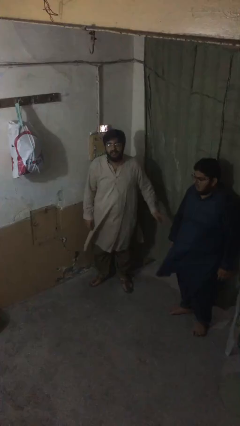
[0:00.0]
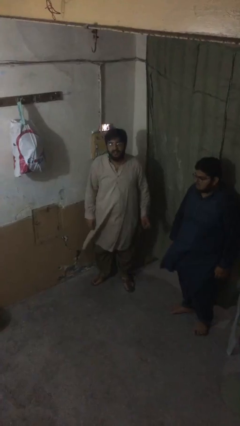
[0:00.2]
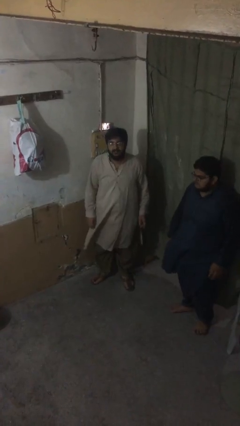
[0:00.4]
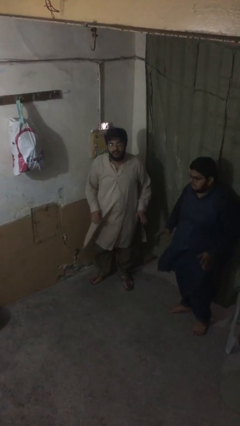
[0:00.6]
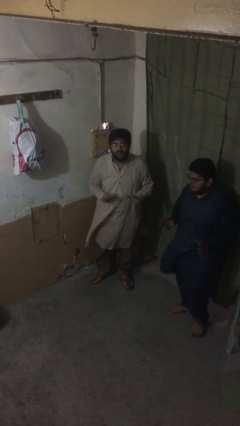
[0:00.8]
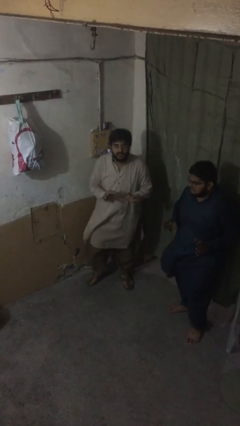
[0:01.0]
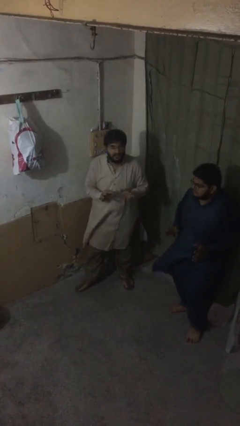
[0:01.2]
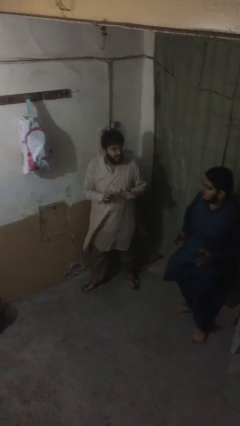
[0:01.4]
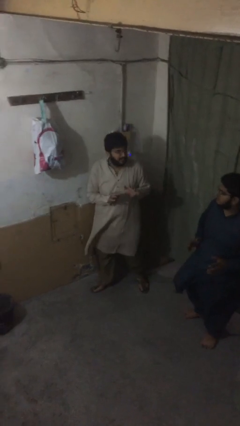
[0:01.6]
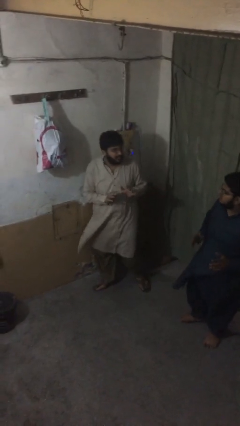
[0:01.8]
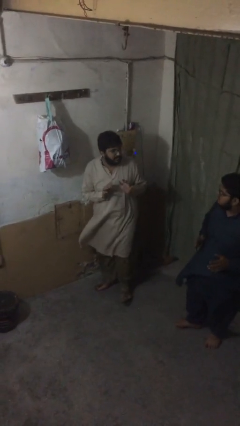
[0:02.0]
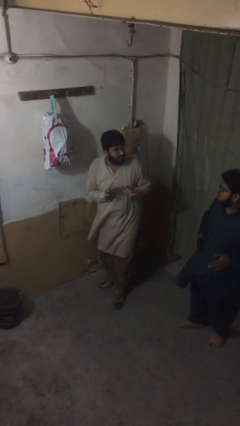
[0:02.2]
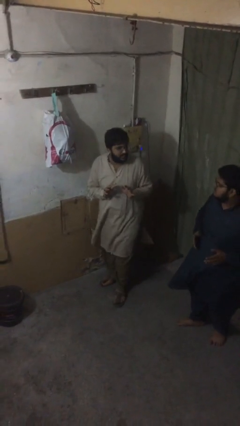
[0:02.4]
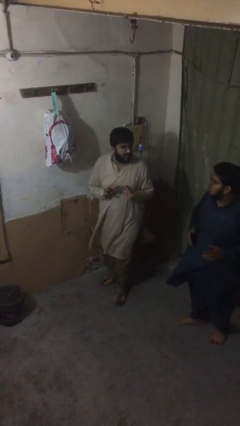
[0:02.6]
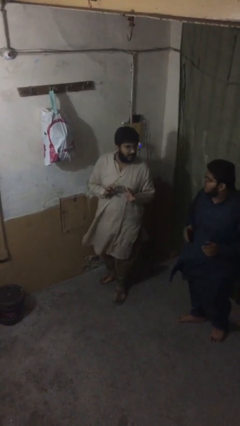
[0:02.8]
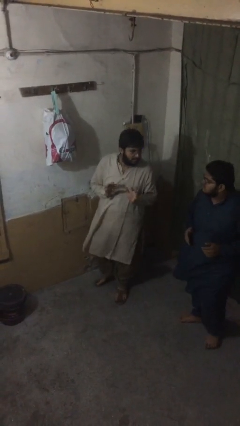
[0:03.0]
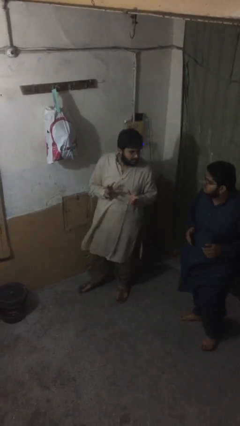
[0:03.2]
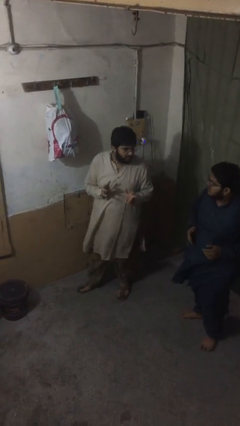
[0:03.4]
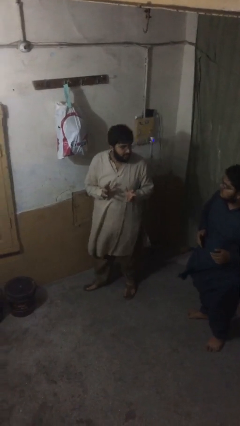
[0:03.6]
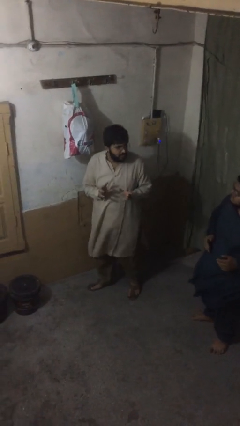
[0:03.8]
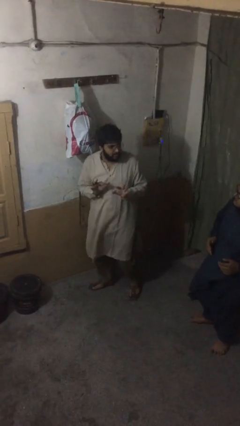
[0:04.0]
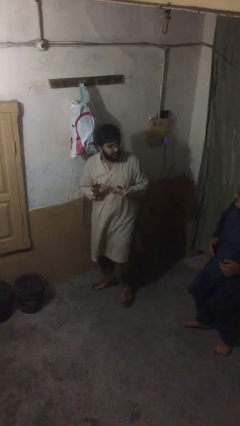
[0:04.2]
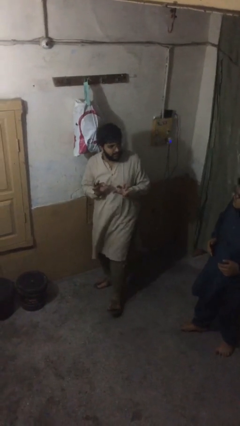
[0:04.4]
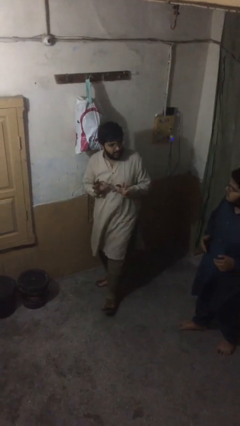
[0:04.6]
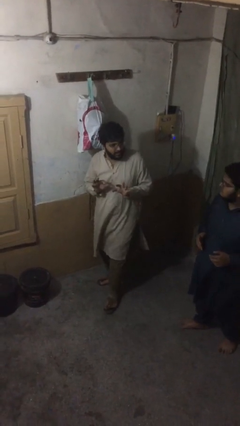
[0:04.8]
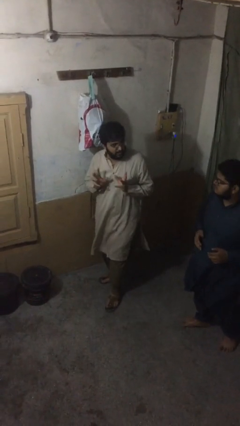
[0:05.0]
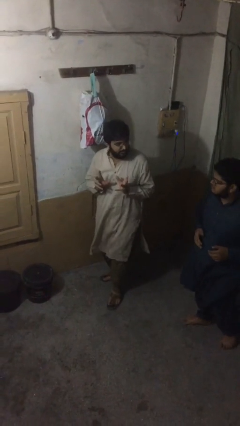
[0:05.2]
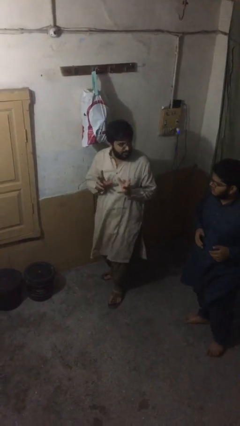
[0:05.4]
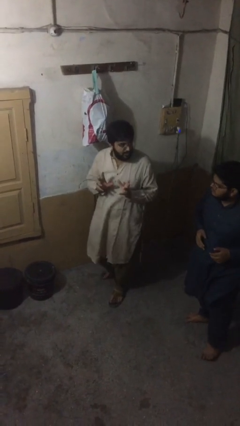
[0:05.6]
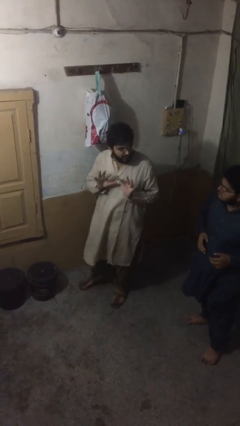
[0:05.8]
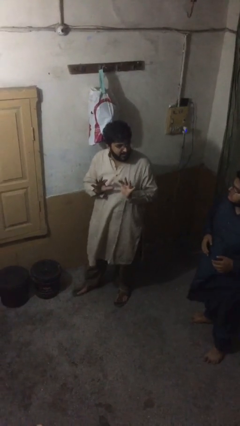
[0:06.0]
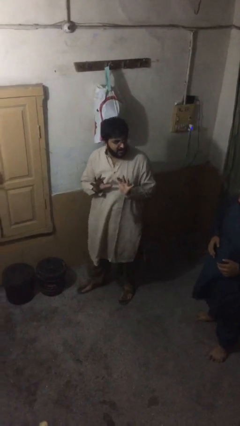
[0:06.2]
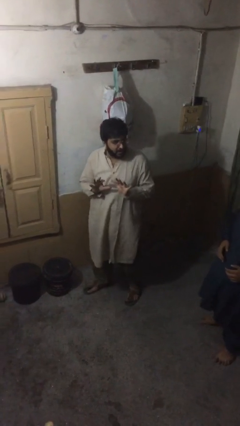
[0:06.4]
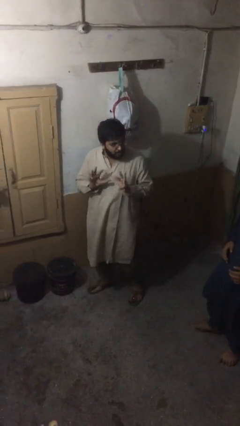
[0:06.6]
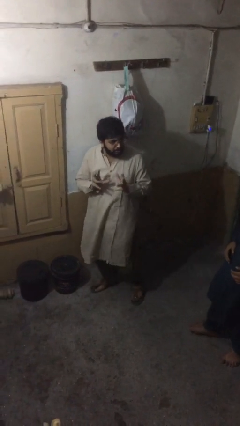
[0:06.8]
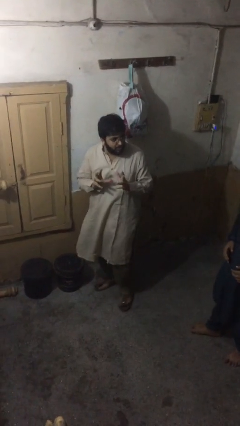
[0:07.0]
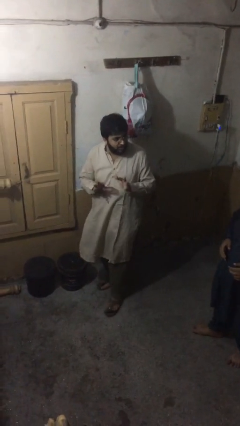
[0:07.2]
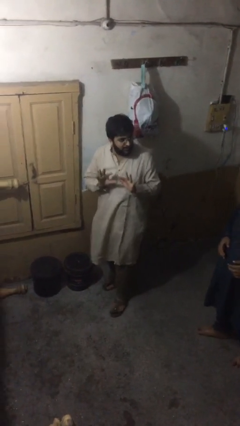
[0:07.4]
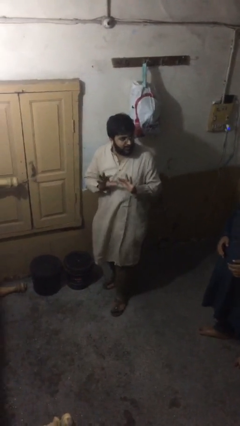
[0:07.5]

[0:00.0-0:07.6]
person talks to person

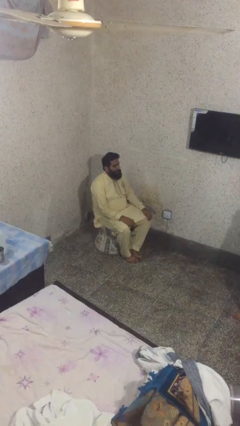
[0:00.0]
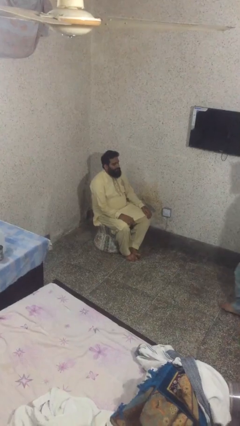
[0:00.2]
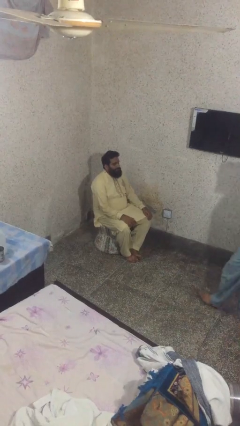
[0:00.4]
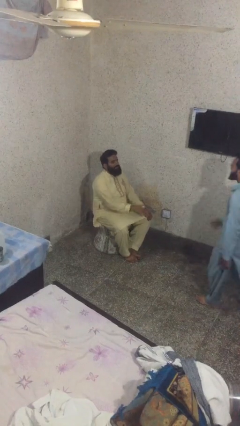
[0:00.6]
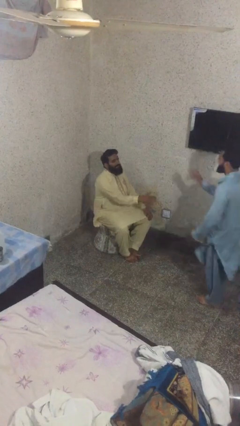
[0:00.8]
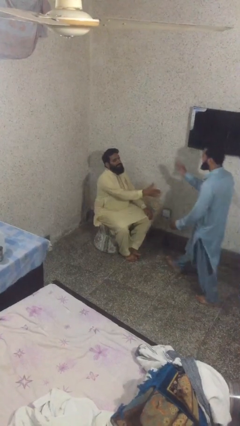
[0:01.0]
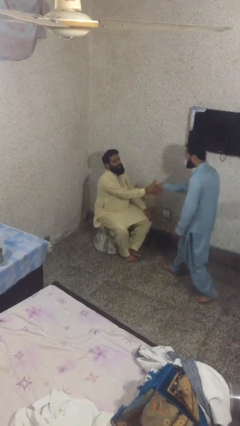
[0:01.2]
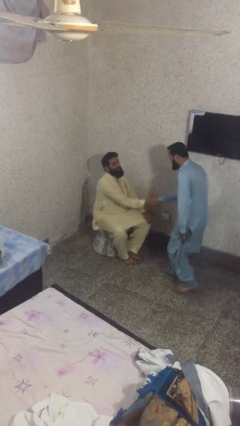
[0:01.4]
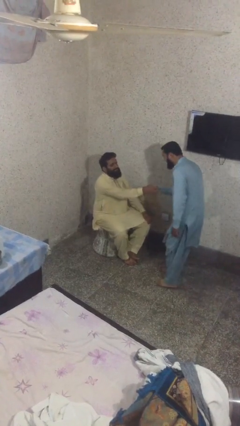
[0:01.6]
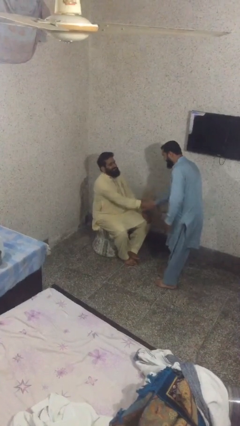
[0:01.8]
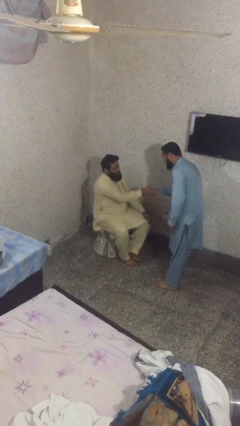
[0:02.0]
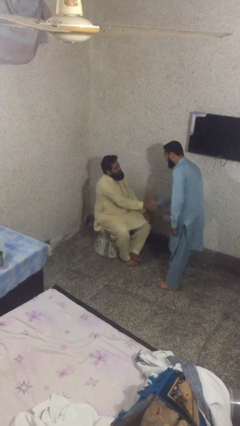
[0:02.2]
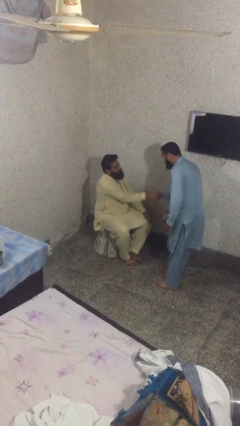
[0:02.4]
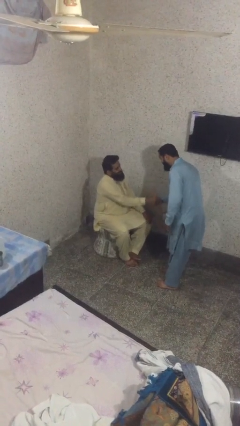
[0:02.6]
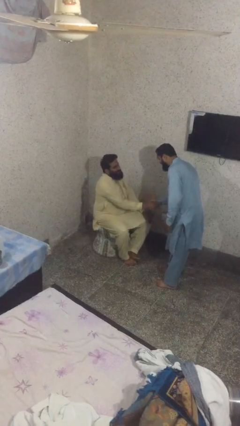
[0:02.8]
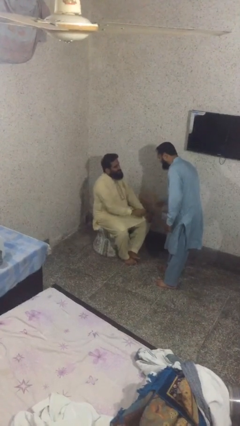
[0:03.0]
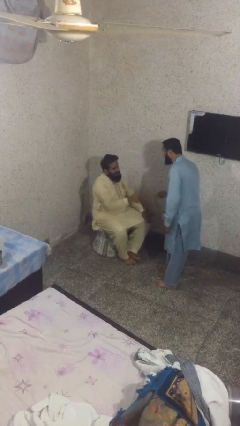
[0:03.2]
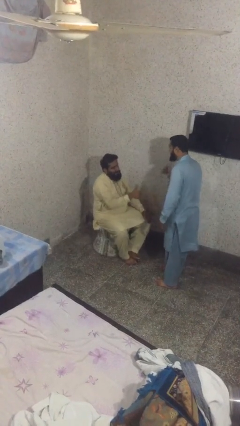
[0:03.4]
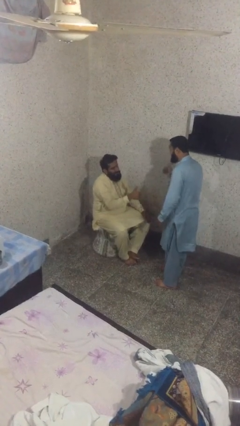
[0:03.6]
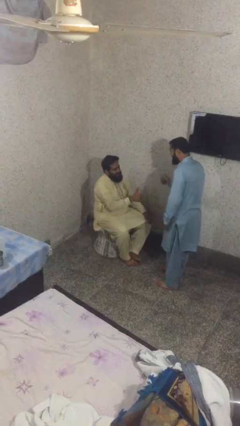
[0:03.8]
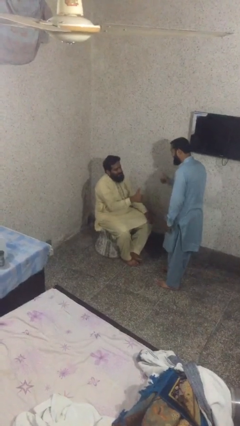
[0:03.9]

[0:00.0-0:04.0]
person shakes hand

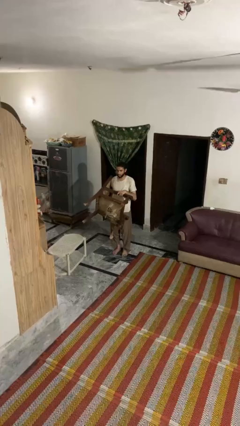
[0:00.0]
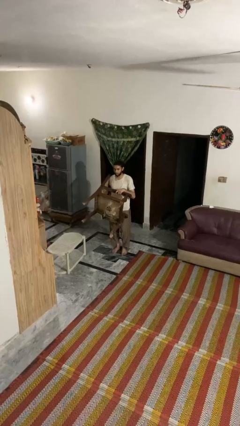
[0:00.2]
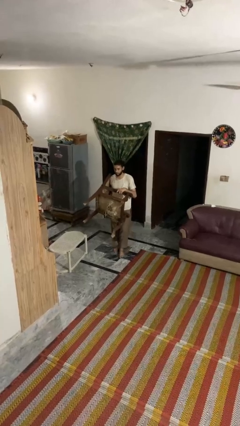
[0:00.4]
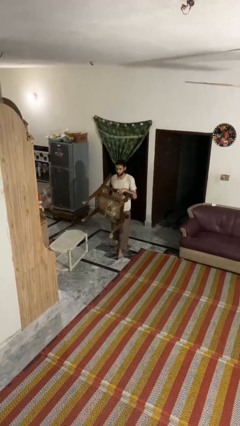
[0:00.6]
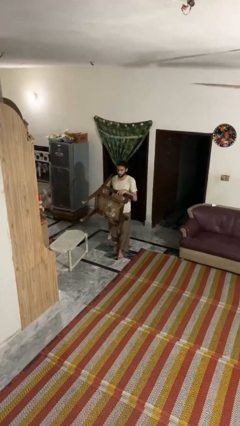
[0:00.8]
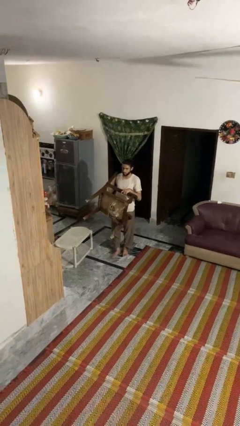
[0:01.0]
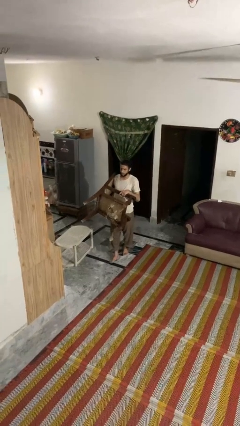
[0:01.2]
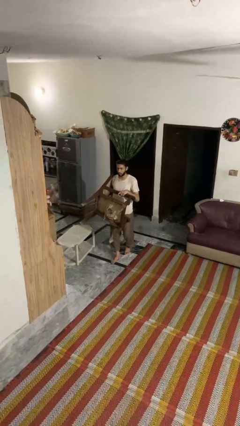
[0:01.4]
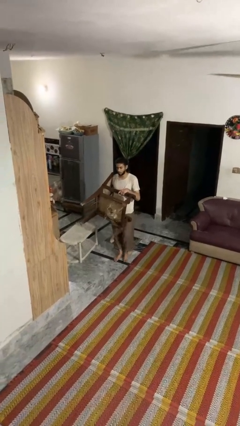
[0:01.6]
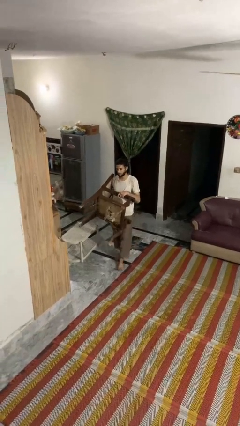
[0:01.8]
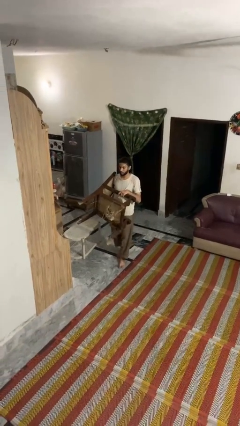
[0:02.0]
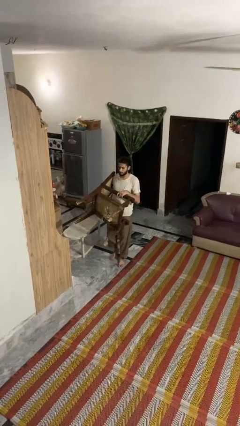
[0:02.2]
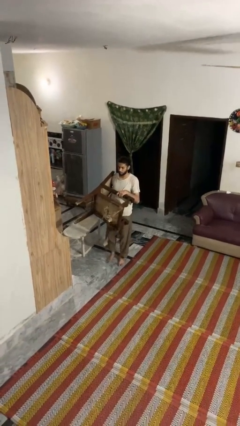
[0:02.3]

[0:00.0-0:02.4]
person carries furniture

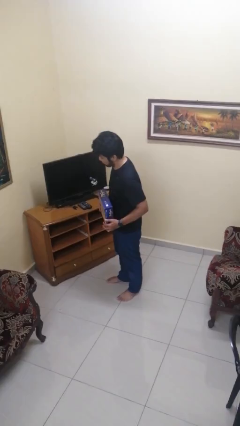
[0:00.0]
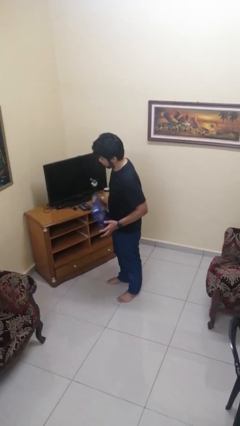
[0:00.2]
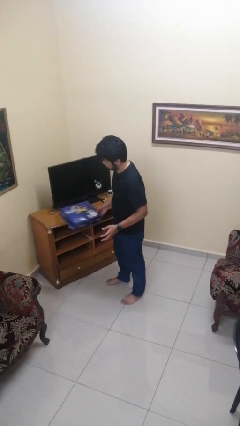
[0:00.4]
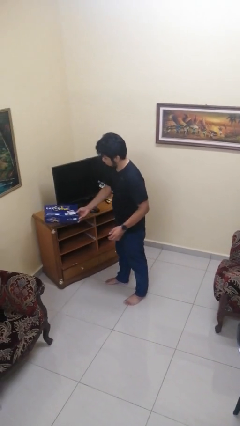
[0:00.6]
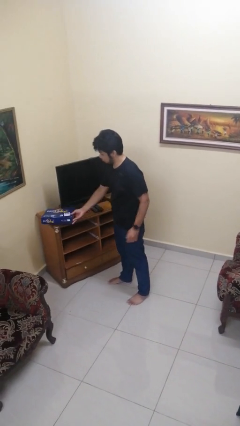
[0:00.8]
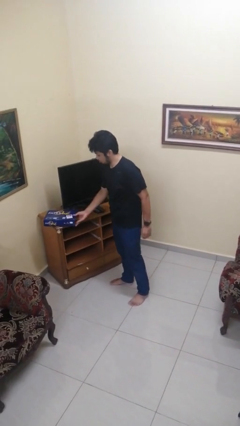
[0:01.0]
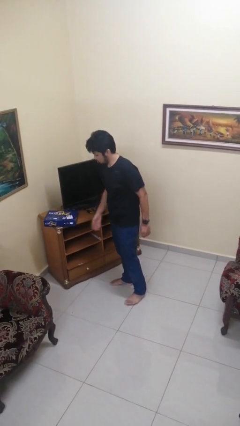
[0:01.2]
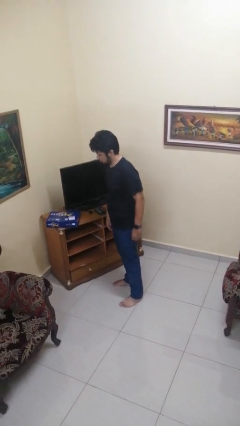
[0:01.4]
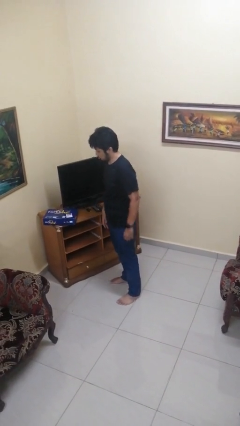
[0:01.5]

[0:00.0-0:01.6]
person puts down object on countertop

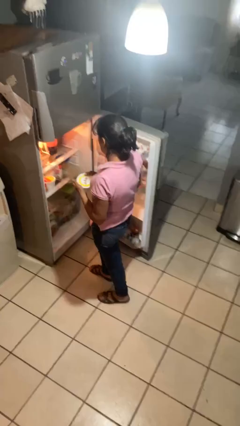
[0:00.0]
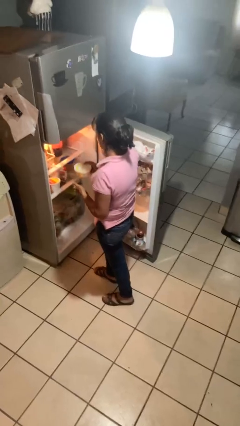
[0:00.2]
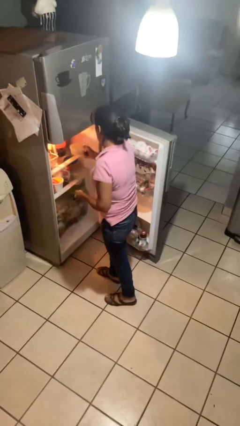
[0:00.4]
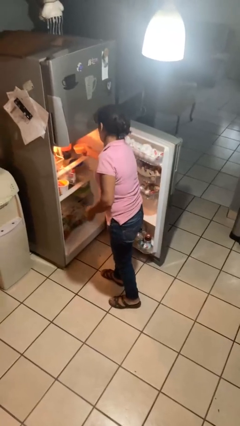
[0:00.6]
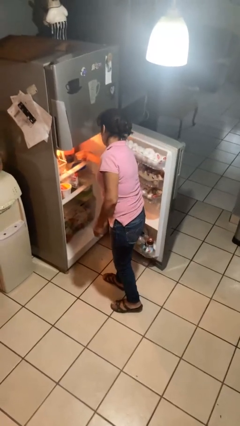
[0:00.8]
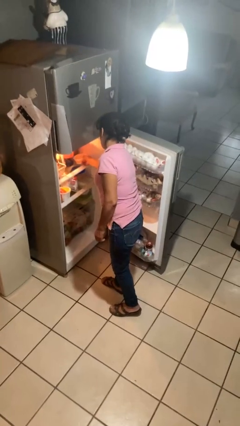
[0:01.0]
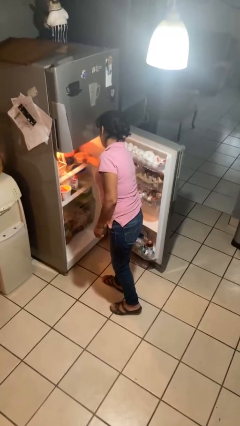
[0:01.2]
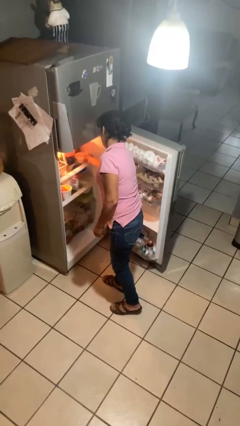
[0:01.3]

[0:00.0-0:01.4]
person takes object from refrigerator
